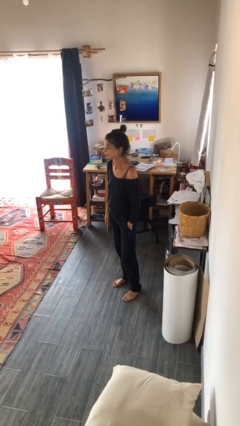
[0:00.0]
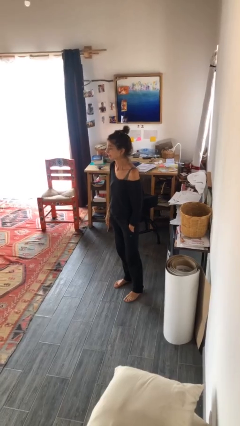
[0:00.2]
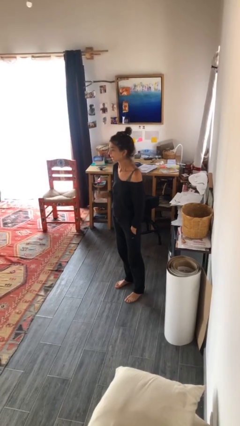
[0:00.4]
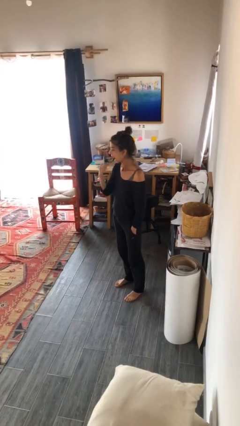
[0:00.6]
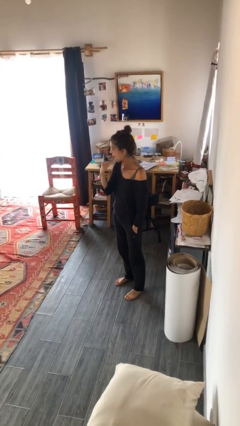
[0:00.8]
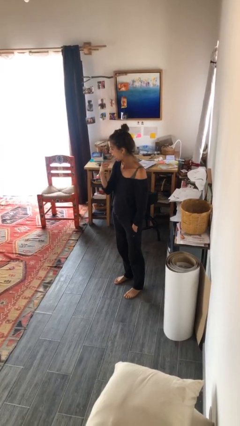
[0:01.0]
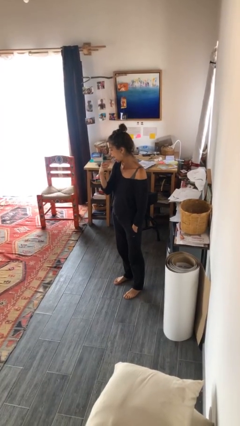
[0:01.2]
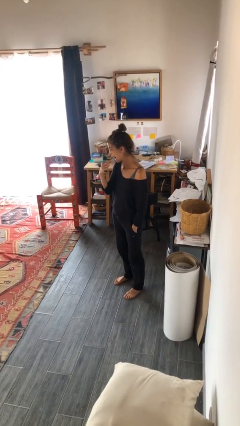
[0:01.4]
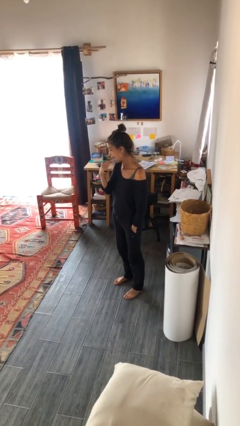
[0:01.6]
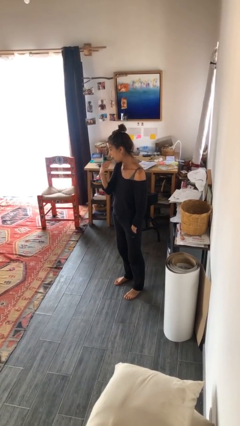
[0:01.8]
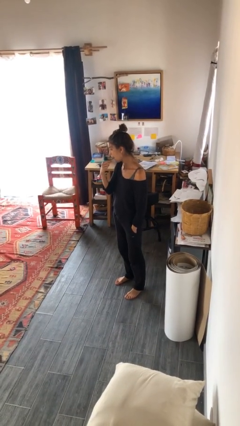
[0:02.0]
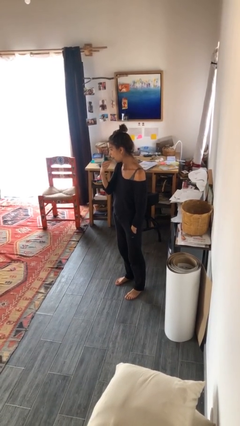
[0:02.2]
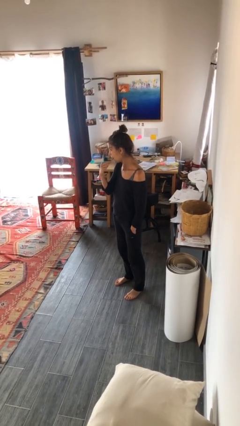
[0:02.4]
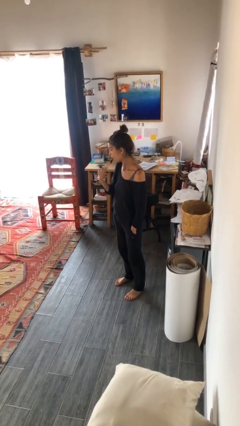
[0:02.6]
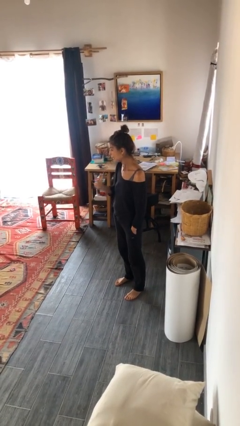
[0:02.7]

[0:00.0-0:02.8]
person brushes teeth

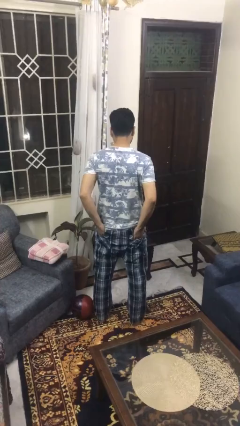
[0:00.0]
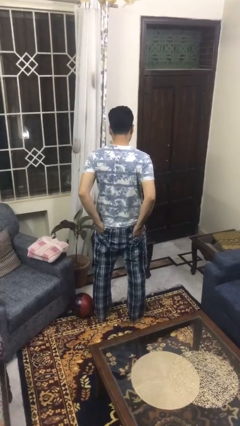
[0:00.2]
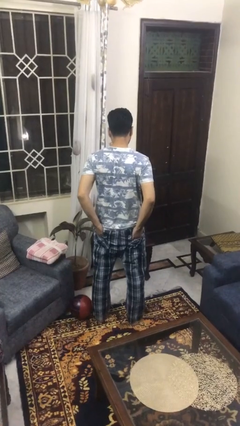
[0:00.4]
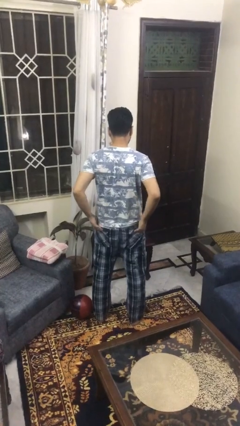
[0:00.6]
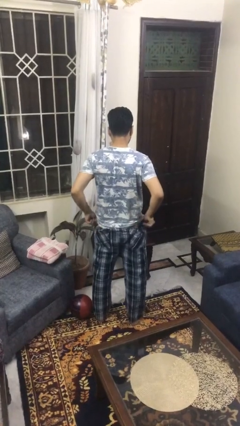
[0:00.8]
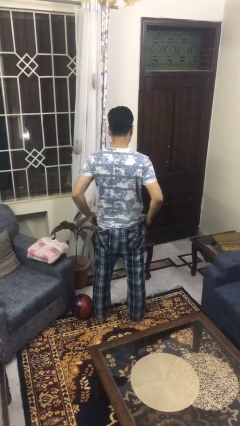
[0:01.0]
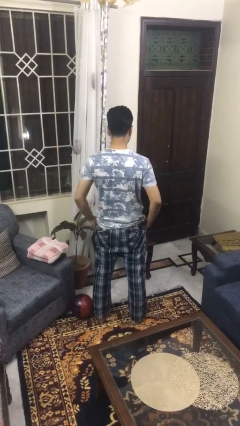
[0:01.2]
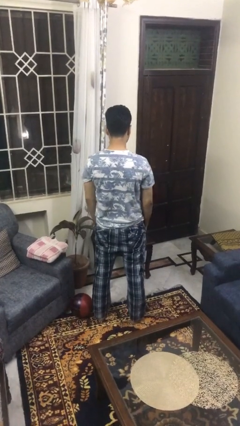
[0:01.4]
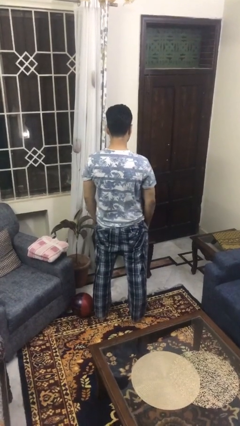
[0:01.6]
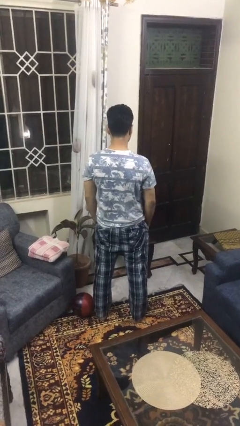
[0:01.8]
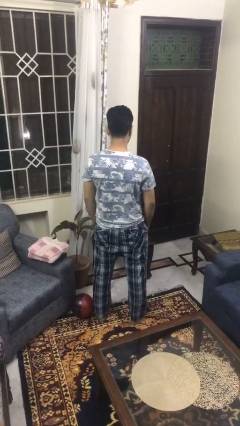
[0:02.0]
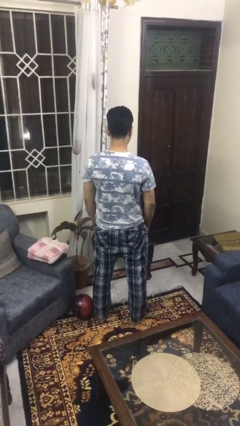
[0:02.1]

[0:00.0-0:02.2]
person puts hands in back pockets

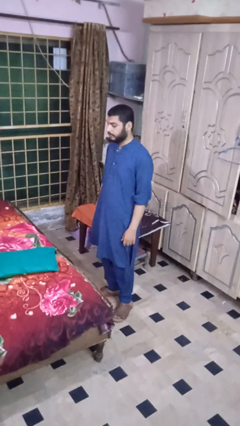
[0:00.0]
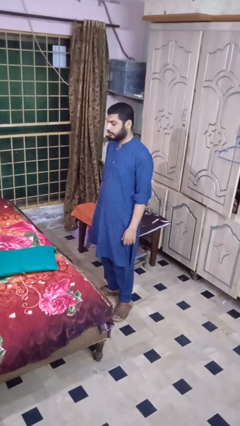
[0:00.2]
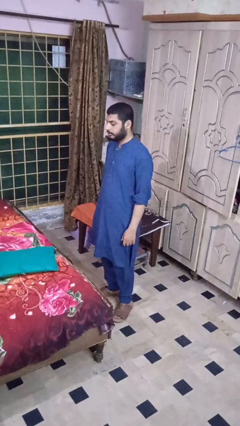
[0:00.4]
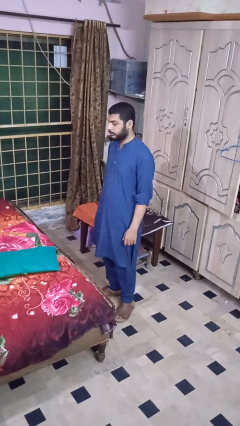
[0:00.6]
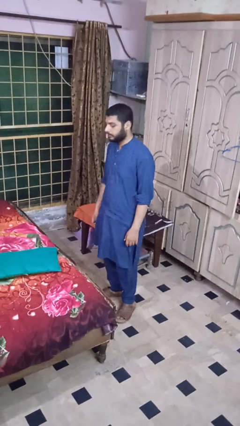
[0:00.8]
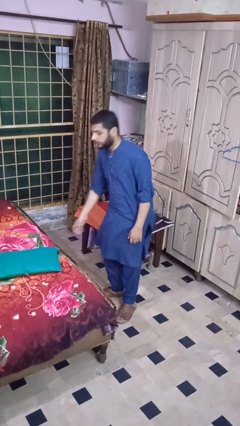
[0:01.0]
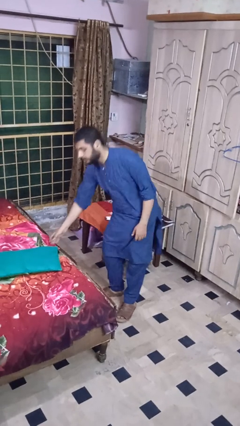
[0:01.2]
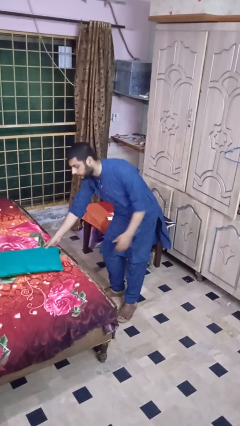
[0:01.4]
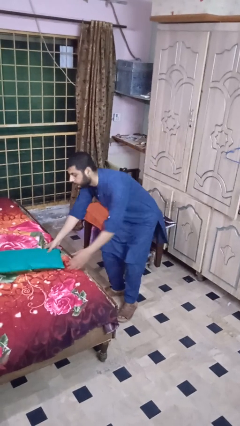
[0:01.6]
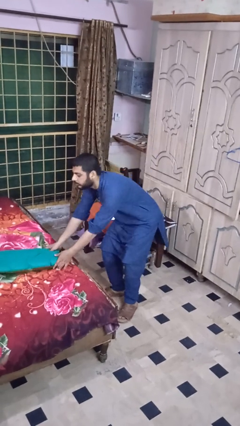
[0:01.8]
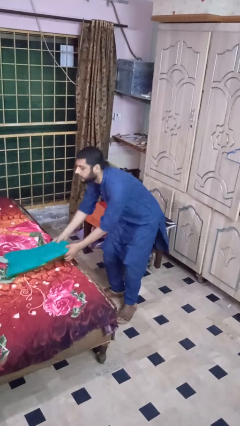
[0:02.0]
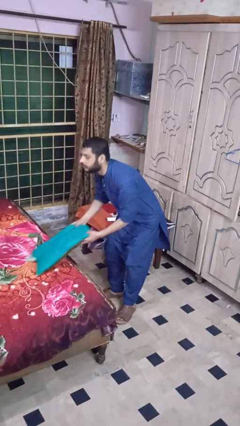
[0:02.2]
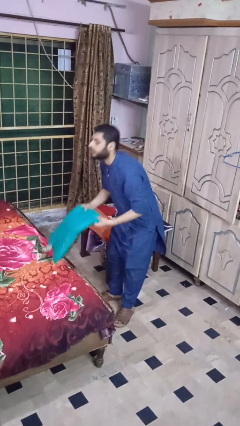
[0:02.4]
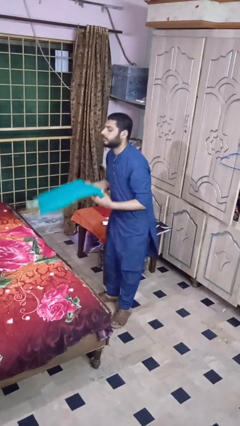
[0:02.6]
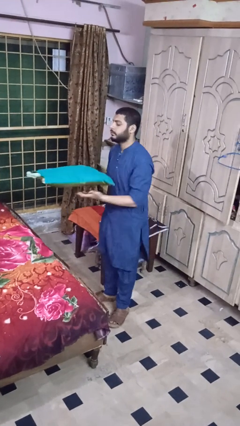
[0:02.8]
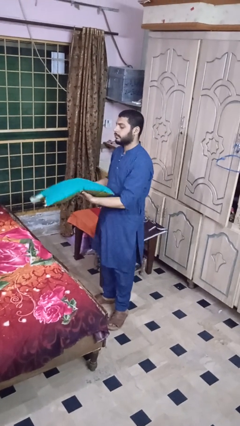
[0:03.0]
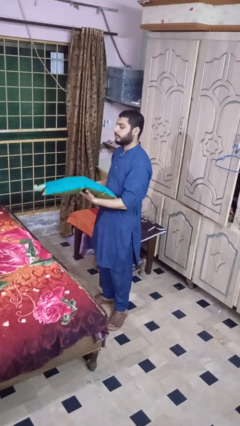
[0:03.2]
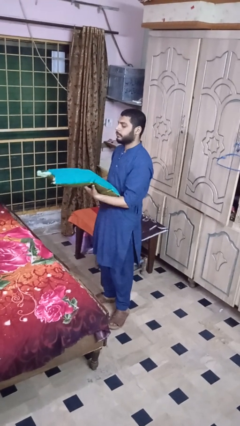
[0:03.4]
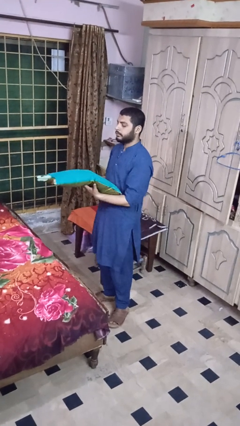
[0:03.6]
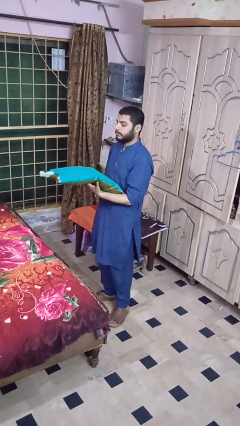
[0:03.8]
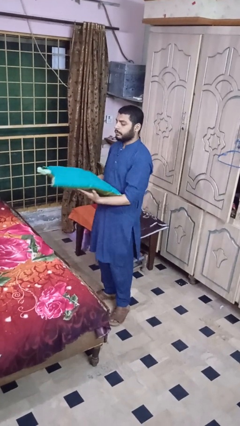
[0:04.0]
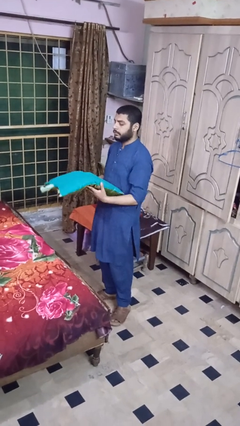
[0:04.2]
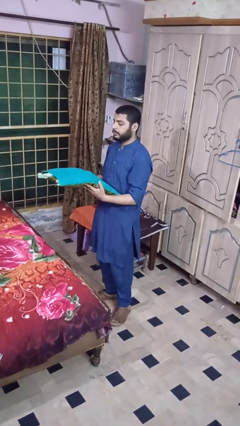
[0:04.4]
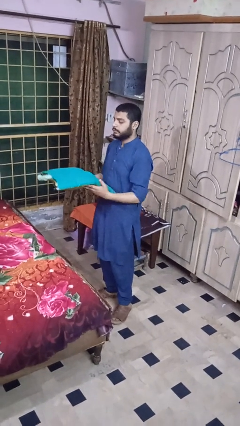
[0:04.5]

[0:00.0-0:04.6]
person picks up object from bed

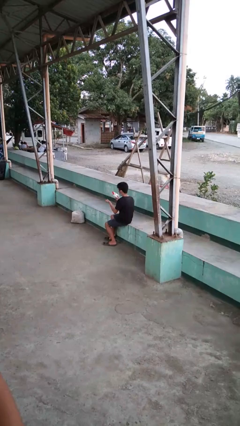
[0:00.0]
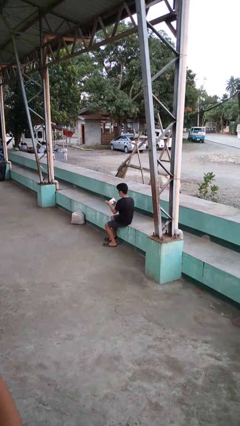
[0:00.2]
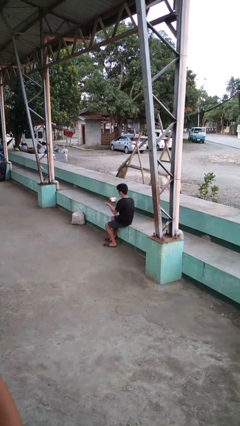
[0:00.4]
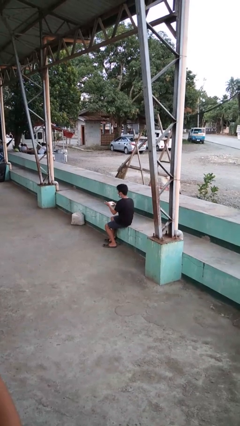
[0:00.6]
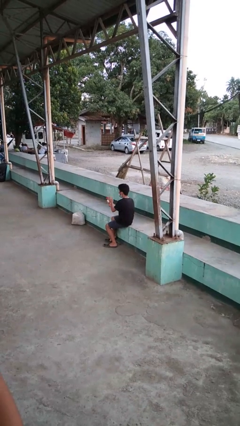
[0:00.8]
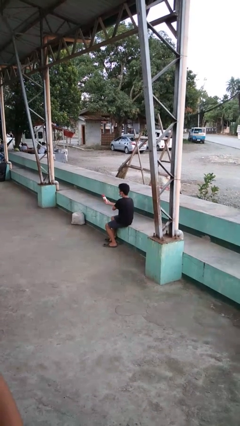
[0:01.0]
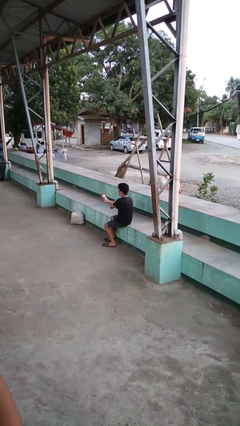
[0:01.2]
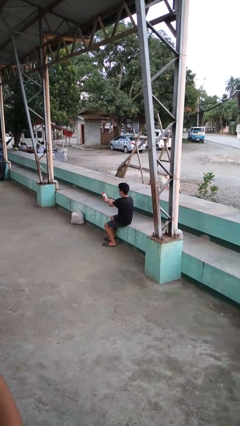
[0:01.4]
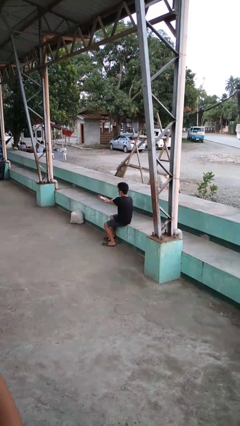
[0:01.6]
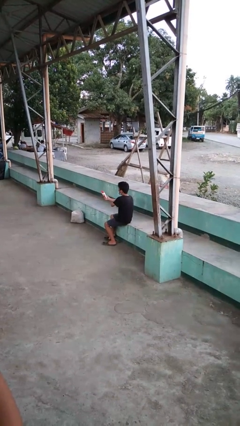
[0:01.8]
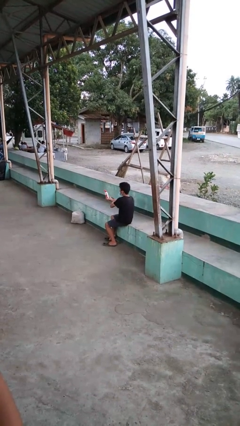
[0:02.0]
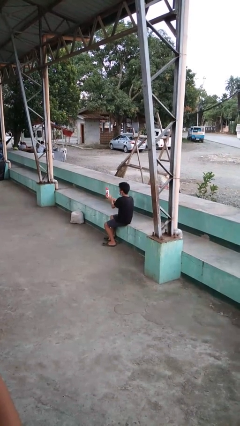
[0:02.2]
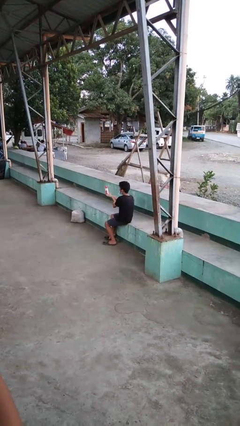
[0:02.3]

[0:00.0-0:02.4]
person applies sunscreen

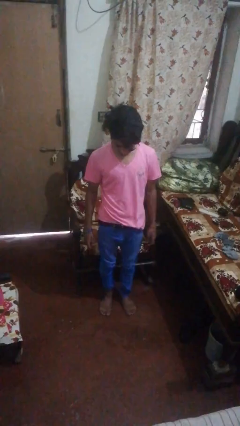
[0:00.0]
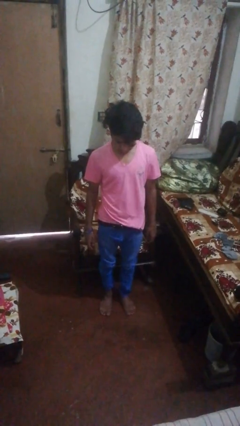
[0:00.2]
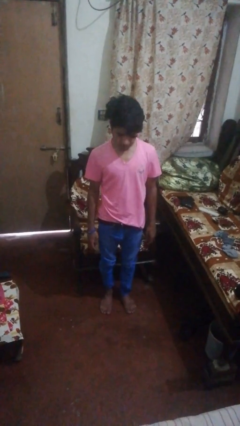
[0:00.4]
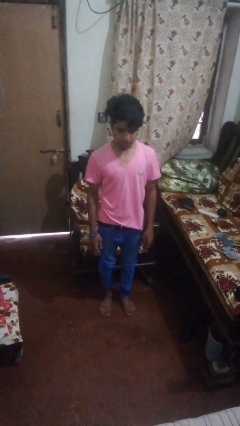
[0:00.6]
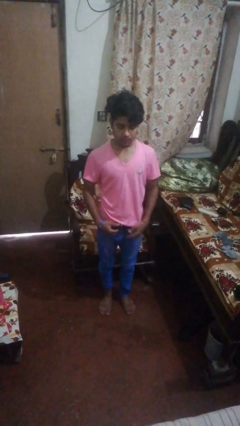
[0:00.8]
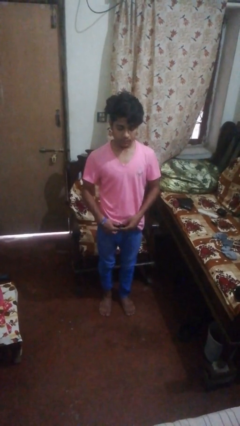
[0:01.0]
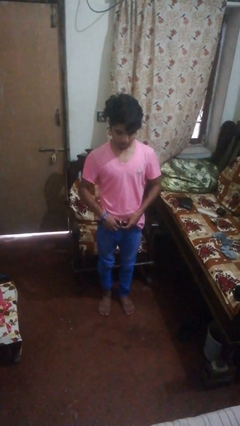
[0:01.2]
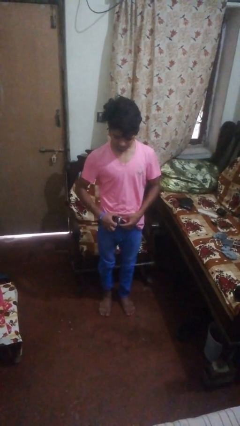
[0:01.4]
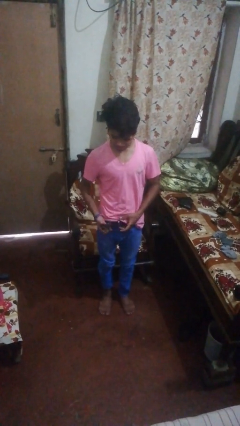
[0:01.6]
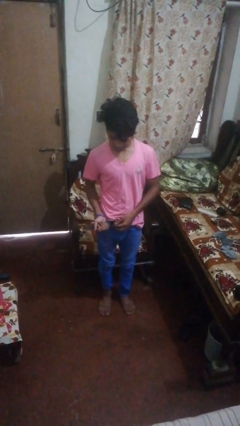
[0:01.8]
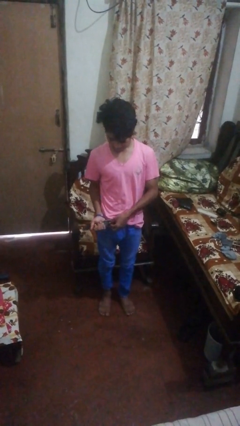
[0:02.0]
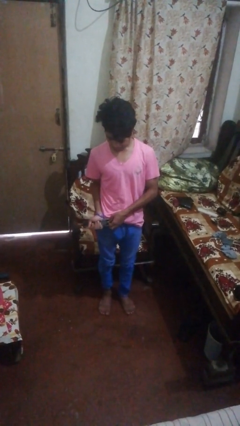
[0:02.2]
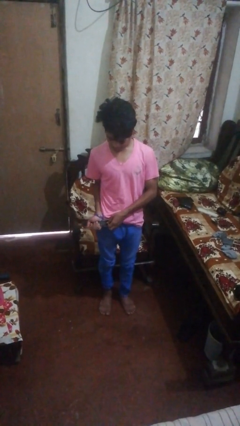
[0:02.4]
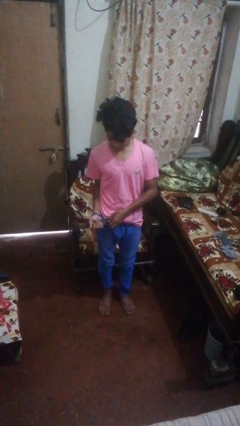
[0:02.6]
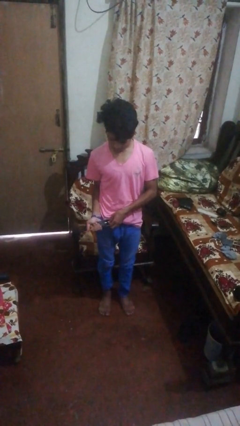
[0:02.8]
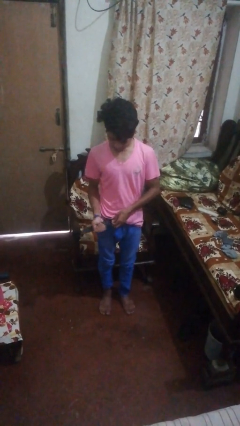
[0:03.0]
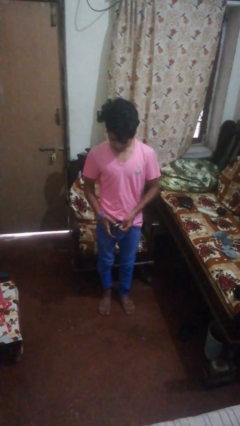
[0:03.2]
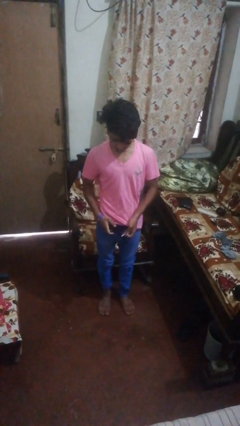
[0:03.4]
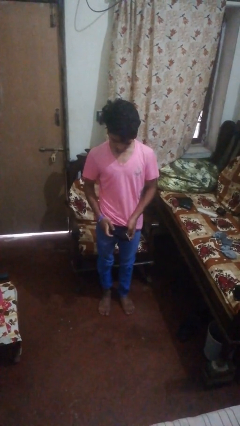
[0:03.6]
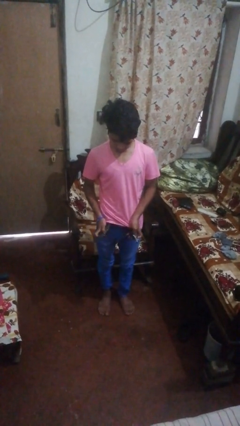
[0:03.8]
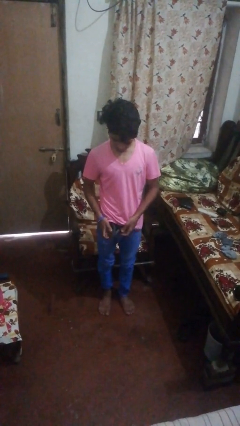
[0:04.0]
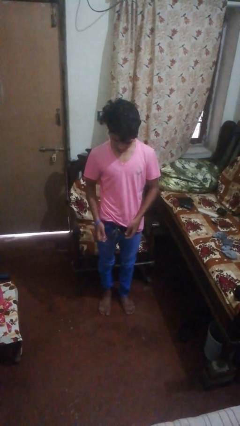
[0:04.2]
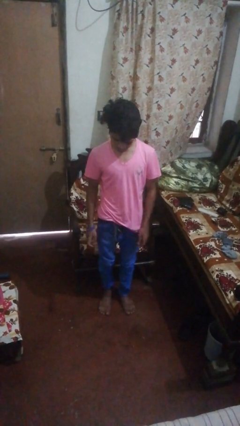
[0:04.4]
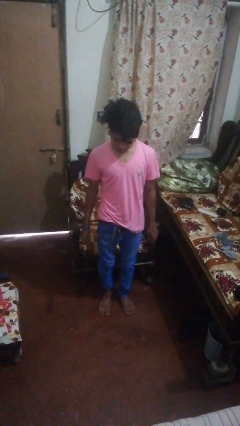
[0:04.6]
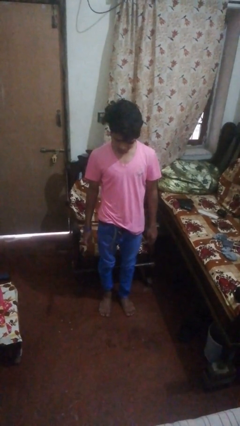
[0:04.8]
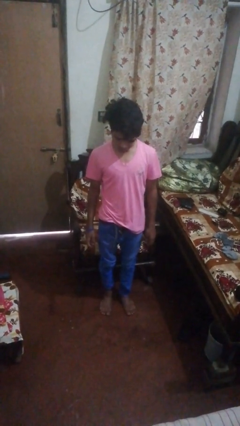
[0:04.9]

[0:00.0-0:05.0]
person takes off belt

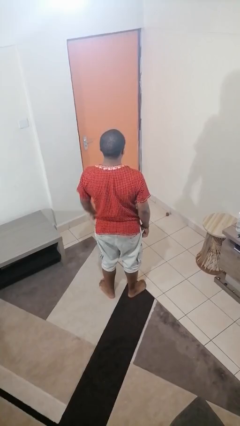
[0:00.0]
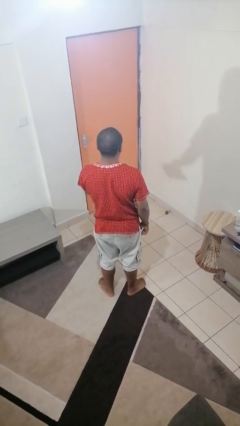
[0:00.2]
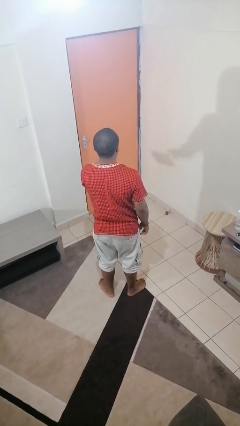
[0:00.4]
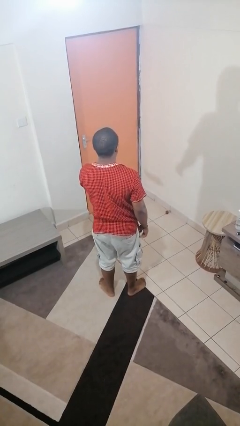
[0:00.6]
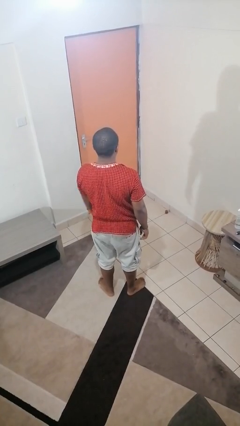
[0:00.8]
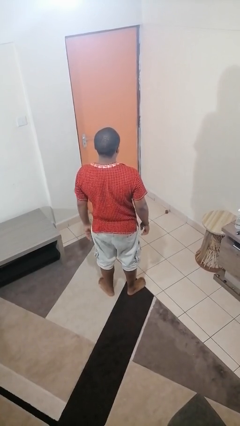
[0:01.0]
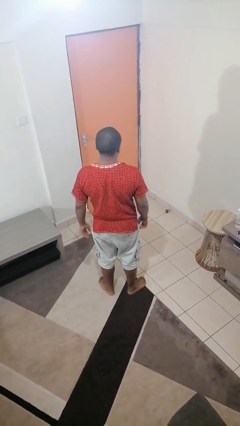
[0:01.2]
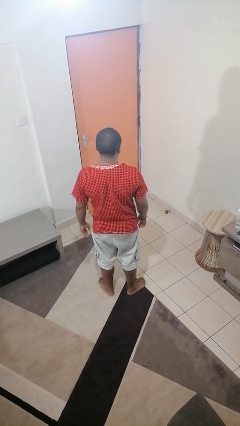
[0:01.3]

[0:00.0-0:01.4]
person throws object to ground
